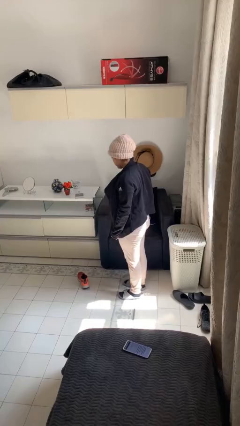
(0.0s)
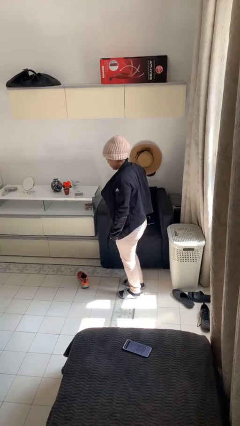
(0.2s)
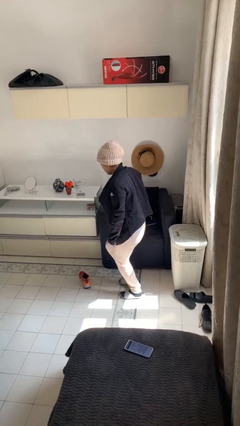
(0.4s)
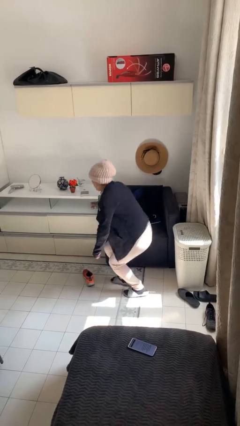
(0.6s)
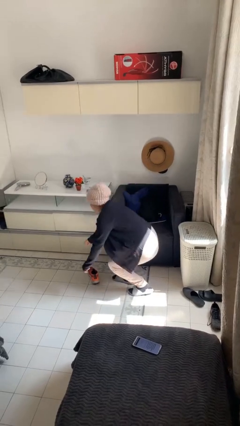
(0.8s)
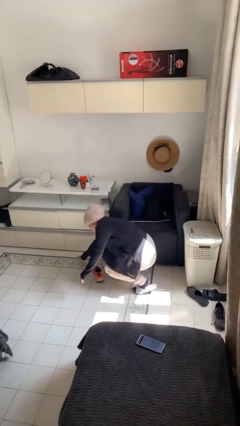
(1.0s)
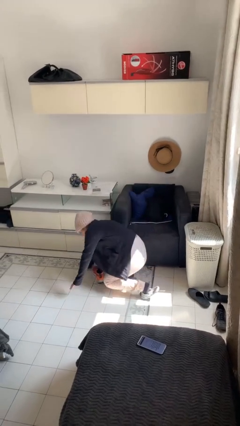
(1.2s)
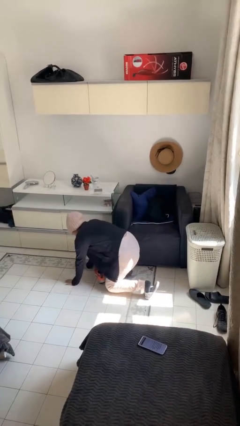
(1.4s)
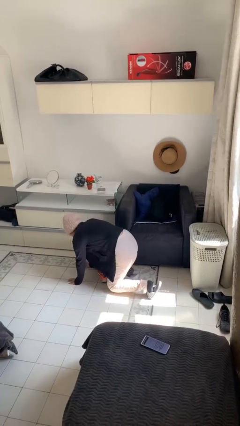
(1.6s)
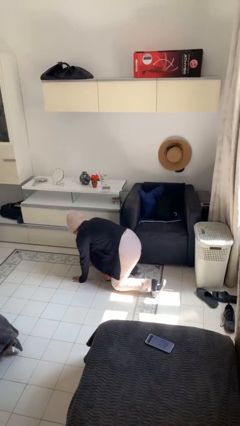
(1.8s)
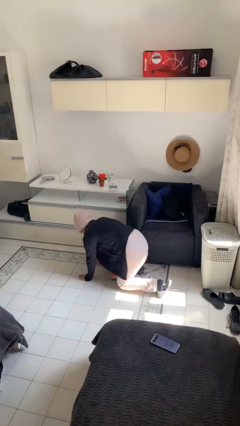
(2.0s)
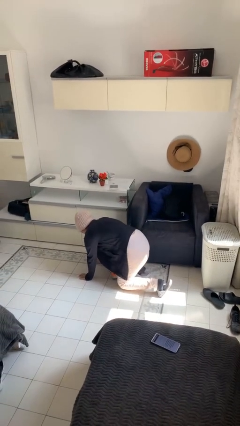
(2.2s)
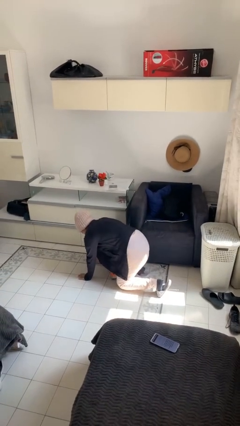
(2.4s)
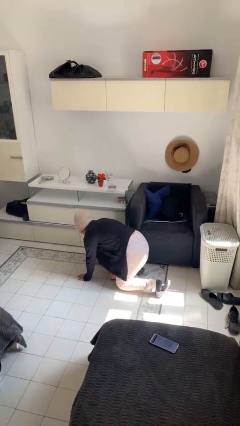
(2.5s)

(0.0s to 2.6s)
person trips on object on floor

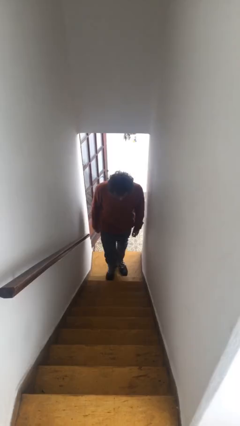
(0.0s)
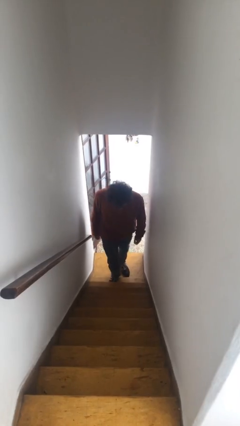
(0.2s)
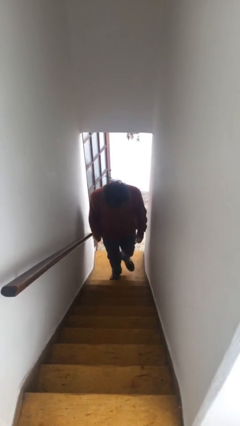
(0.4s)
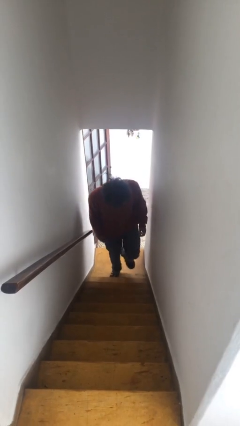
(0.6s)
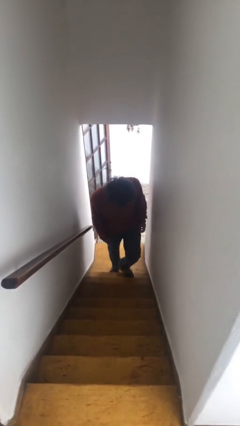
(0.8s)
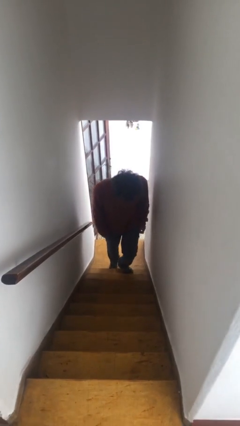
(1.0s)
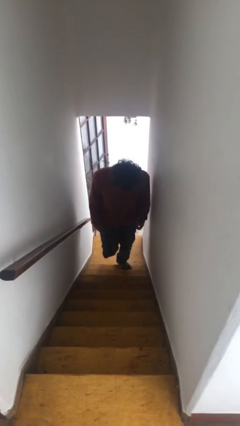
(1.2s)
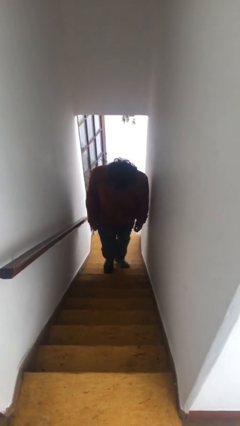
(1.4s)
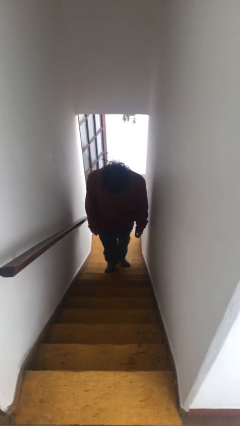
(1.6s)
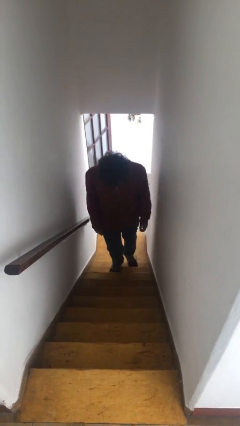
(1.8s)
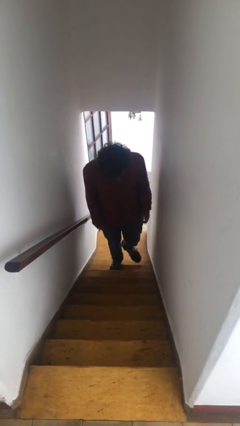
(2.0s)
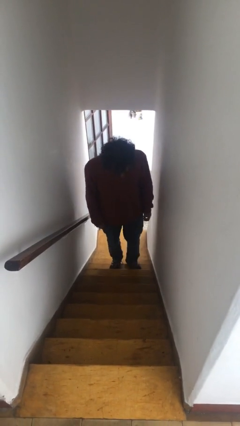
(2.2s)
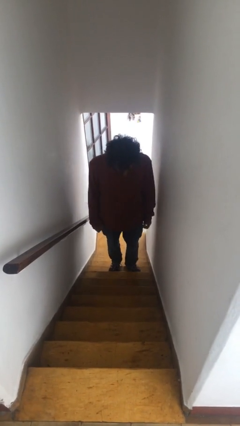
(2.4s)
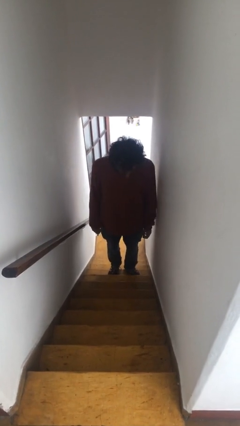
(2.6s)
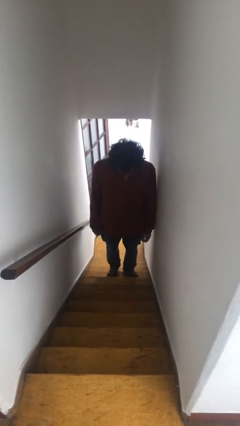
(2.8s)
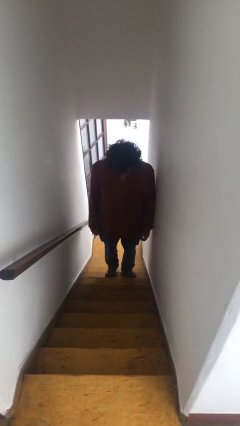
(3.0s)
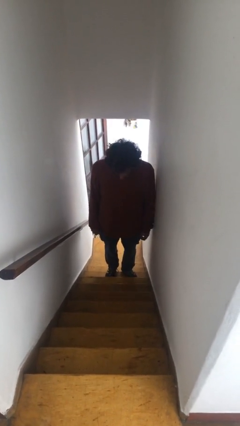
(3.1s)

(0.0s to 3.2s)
person climbs up stairs

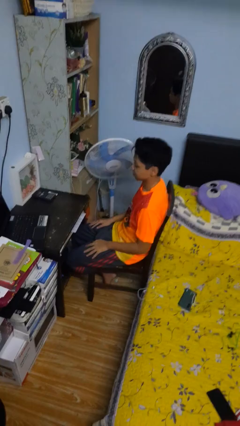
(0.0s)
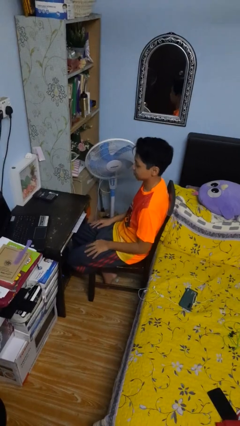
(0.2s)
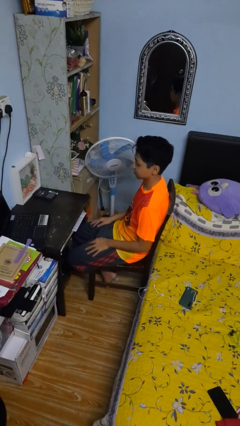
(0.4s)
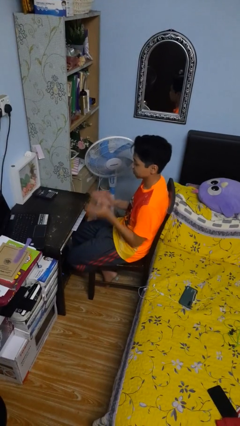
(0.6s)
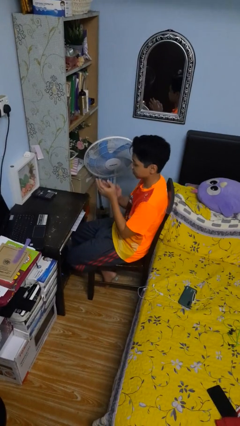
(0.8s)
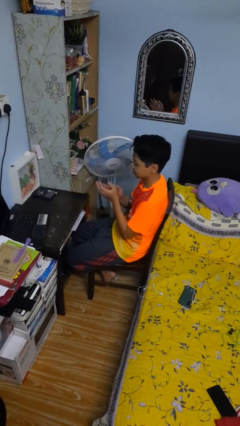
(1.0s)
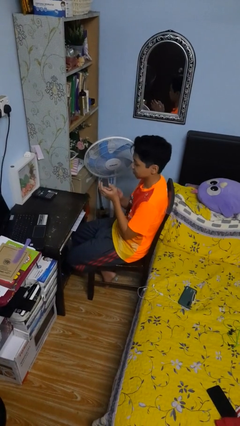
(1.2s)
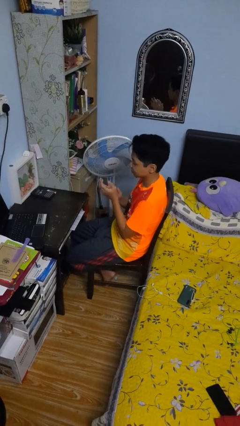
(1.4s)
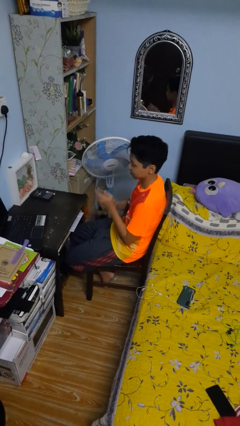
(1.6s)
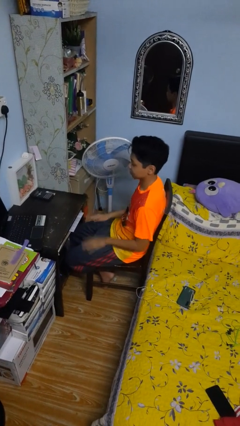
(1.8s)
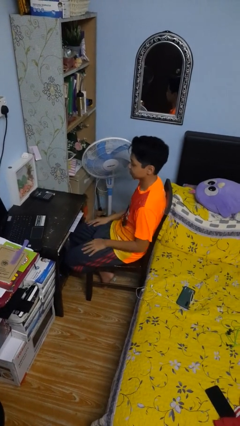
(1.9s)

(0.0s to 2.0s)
person claps hands

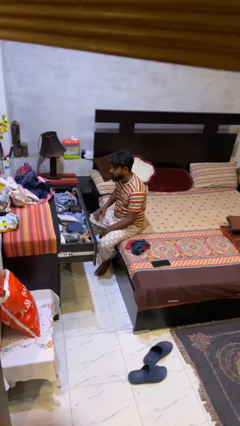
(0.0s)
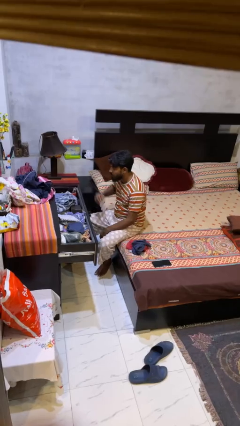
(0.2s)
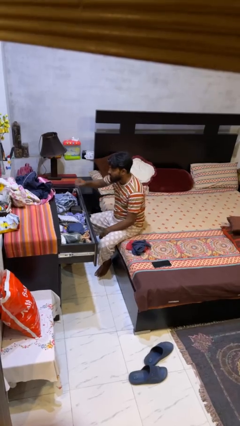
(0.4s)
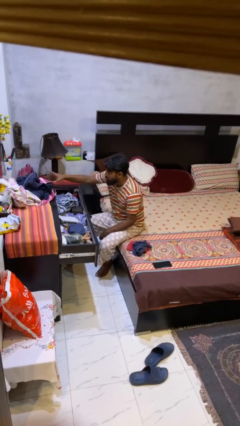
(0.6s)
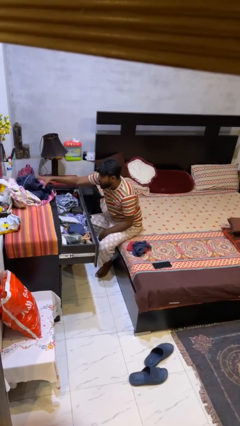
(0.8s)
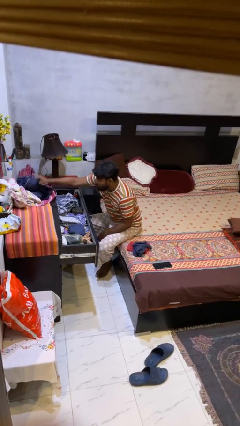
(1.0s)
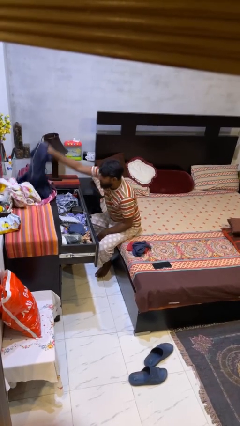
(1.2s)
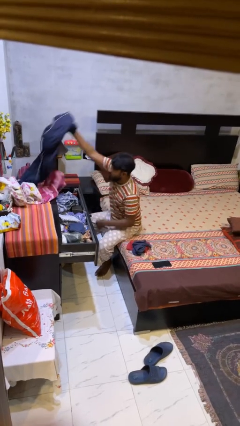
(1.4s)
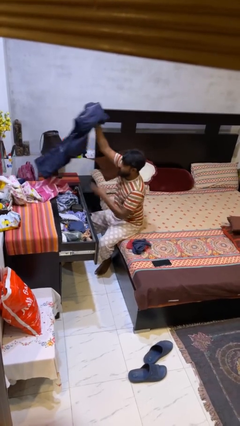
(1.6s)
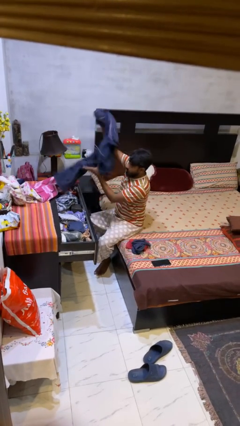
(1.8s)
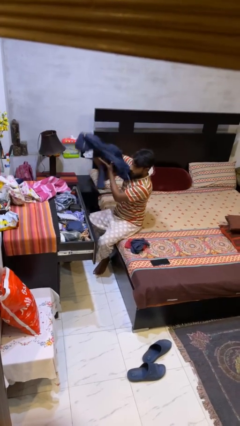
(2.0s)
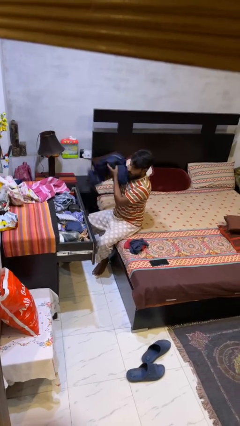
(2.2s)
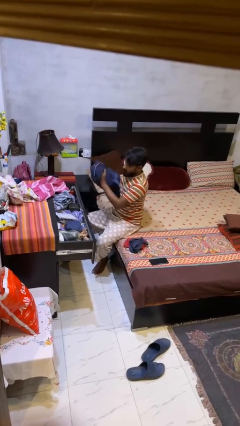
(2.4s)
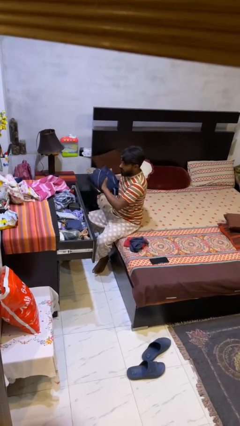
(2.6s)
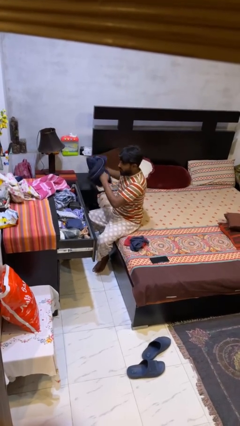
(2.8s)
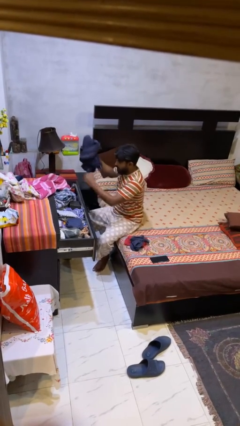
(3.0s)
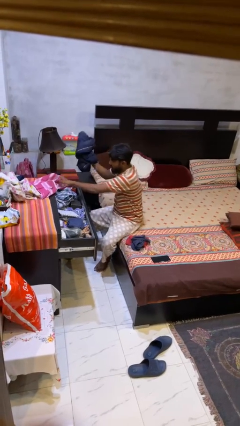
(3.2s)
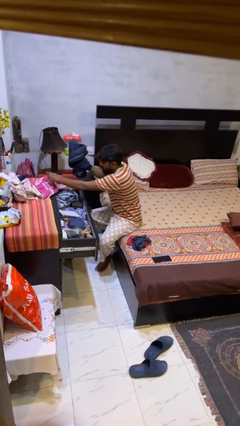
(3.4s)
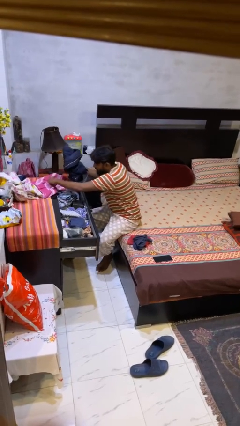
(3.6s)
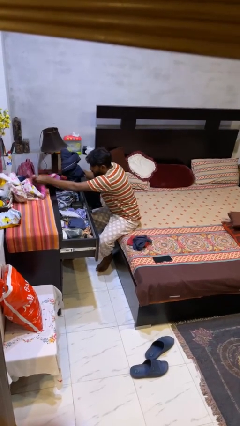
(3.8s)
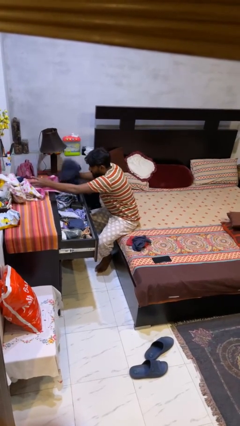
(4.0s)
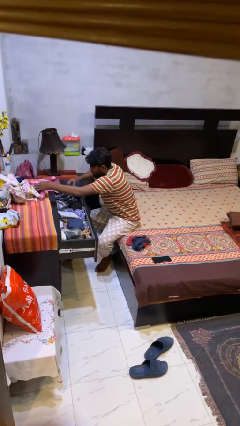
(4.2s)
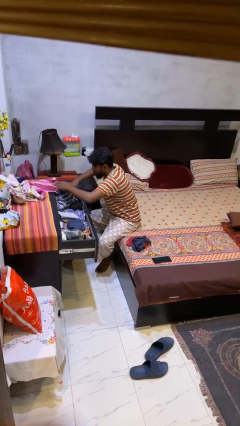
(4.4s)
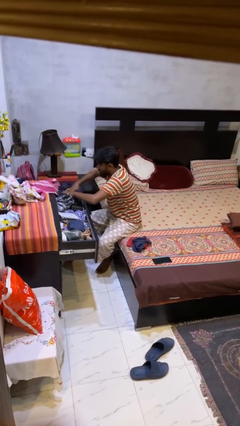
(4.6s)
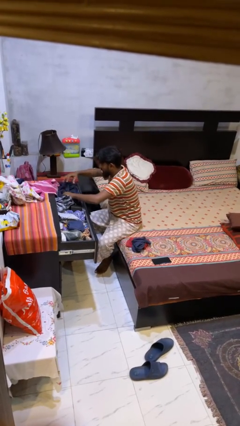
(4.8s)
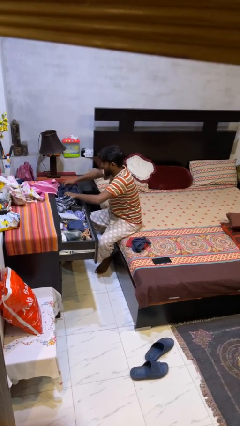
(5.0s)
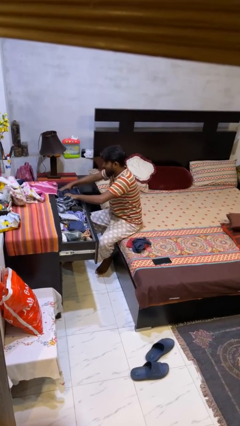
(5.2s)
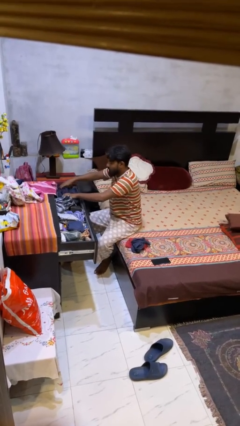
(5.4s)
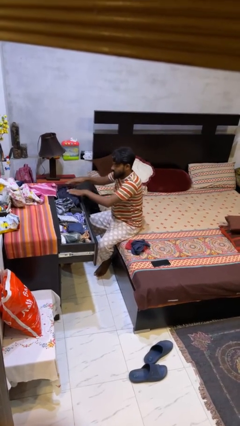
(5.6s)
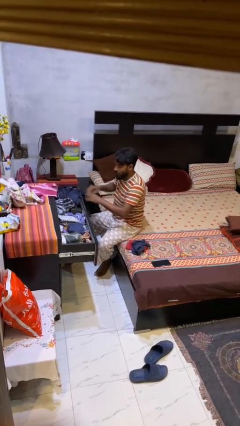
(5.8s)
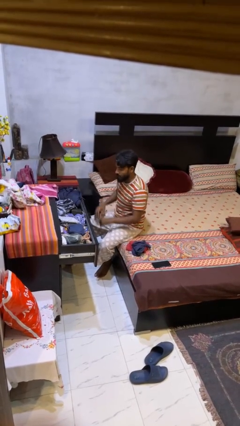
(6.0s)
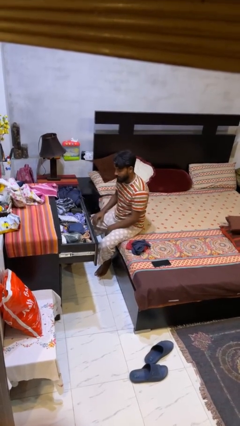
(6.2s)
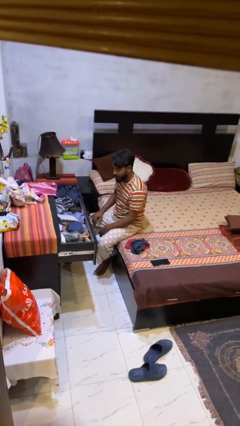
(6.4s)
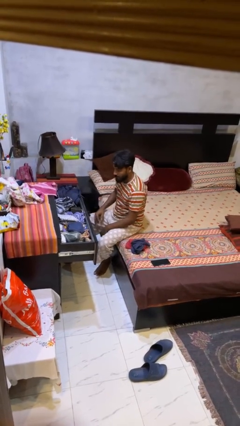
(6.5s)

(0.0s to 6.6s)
person puts clothes into dresser

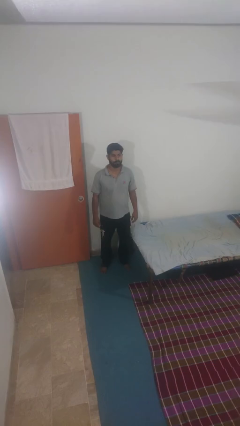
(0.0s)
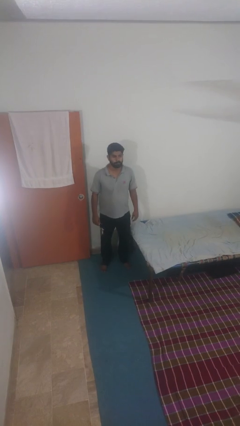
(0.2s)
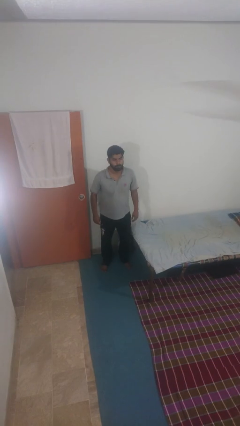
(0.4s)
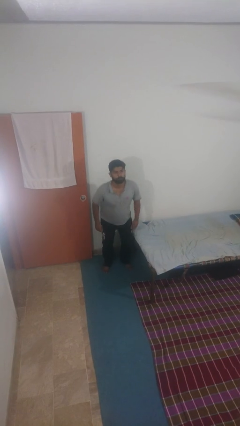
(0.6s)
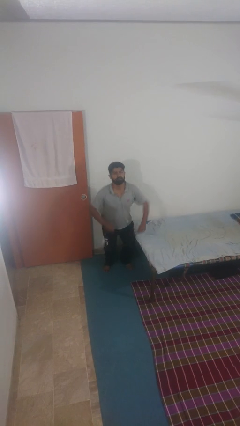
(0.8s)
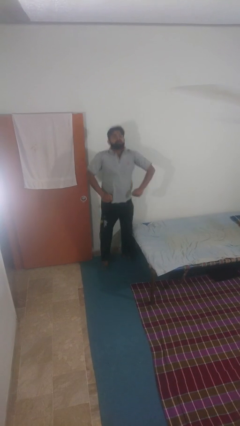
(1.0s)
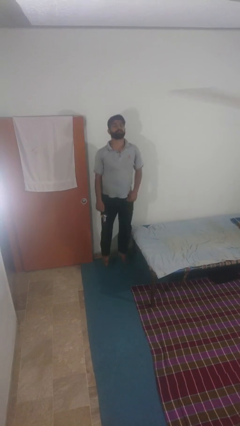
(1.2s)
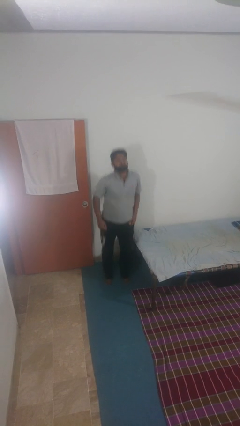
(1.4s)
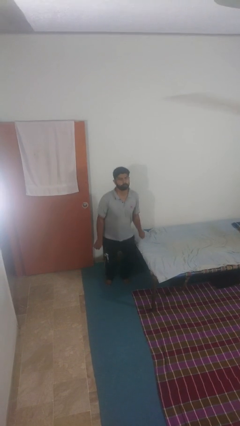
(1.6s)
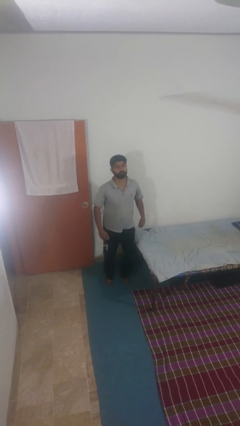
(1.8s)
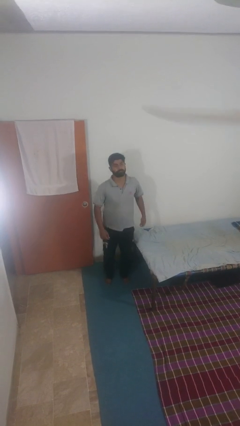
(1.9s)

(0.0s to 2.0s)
person jumps

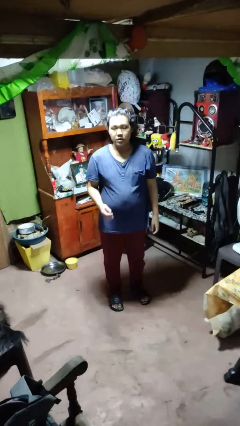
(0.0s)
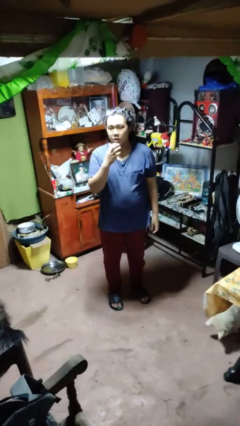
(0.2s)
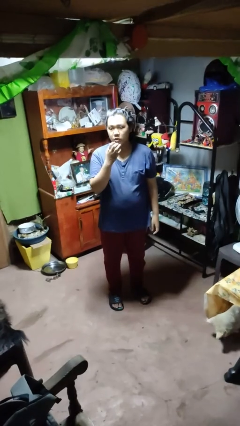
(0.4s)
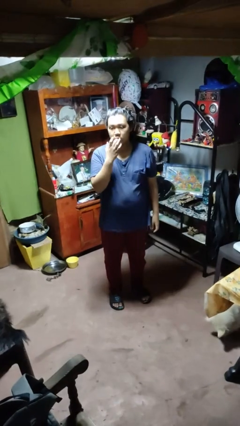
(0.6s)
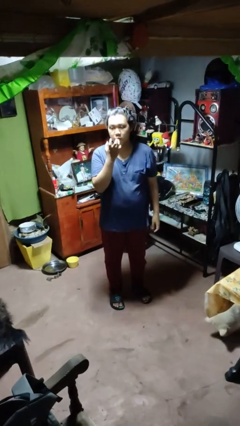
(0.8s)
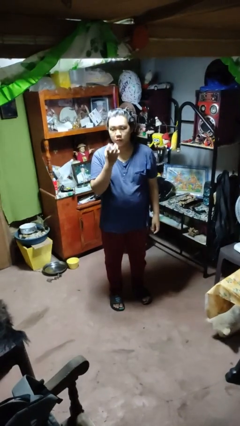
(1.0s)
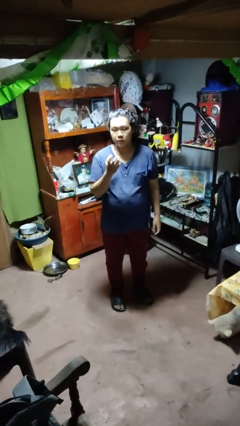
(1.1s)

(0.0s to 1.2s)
person licks fingers
